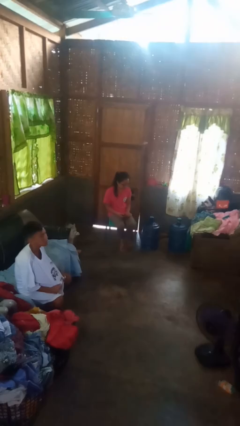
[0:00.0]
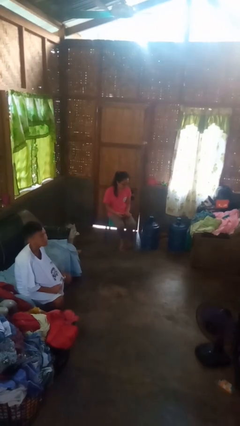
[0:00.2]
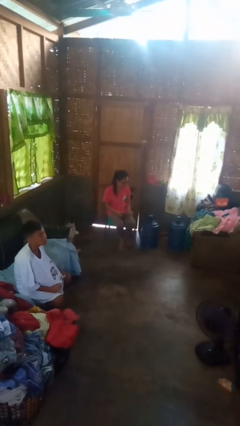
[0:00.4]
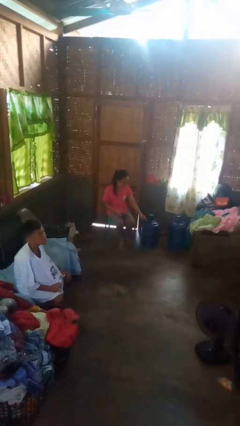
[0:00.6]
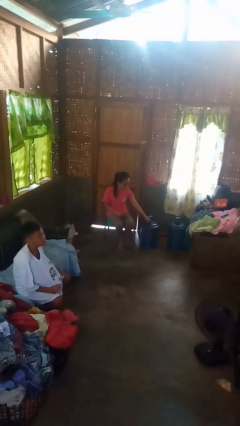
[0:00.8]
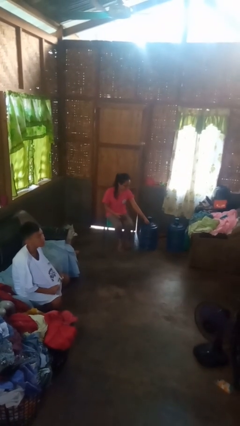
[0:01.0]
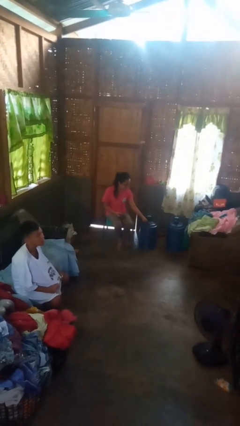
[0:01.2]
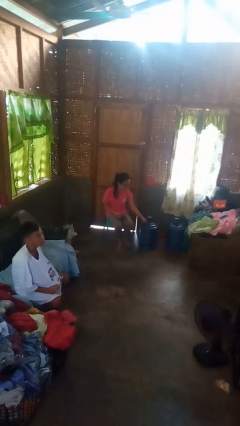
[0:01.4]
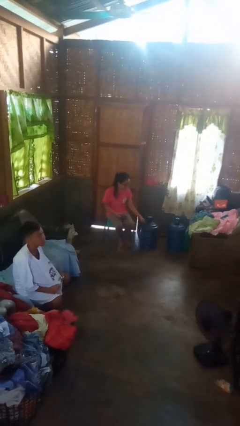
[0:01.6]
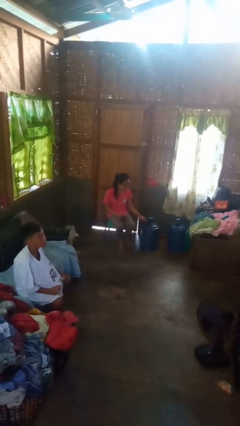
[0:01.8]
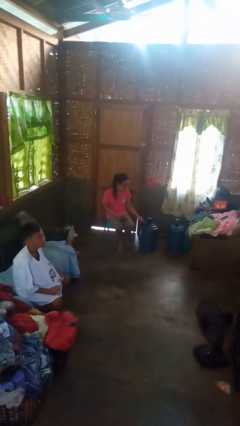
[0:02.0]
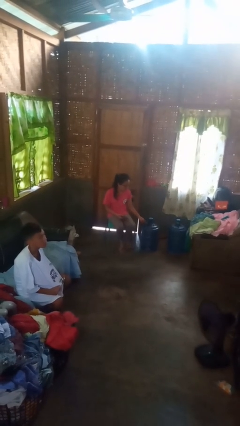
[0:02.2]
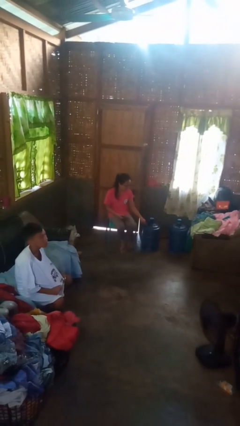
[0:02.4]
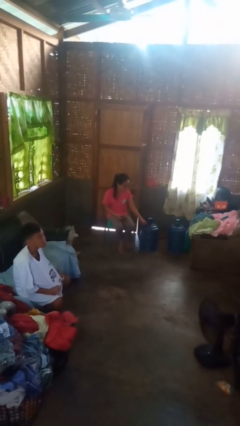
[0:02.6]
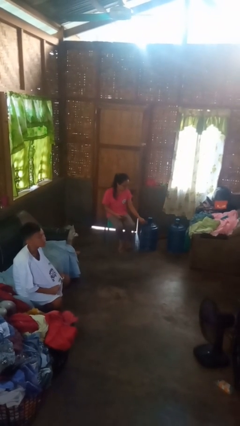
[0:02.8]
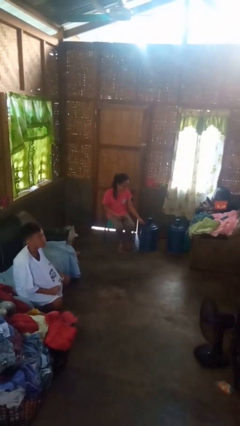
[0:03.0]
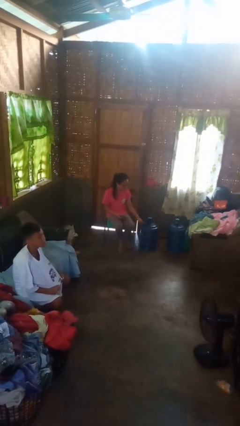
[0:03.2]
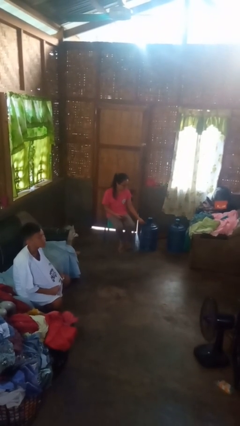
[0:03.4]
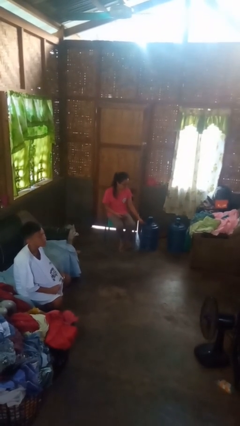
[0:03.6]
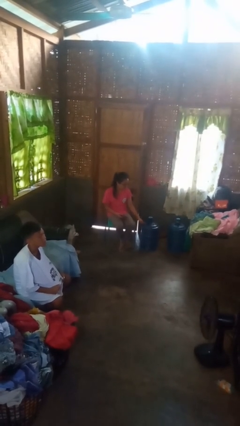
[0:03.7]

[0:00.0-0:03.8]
person taps object with finger

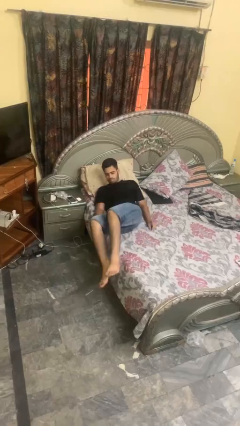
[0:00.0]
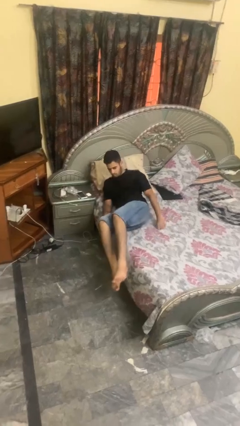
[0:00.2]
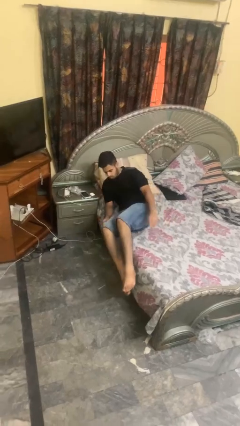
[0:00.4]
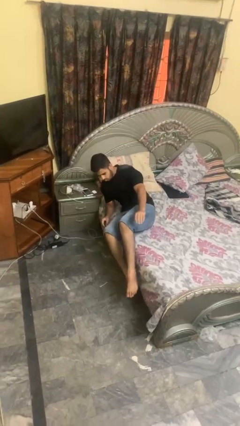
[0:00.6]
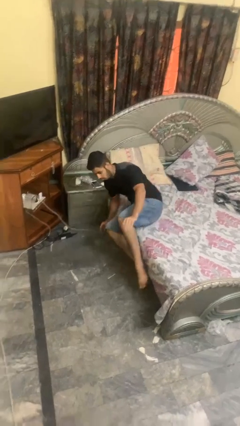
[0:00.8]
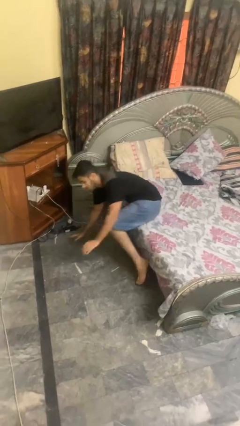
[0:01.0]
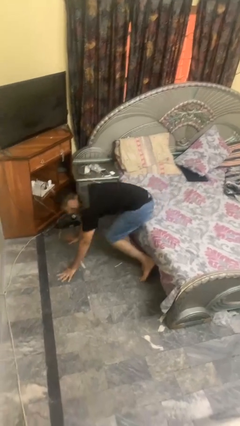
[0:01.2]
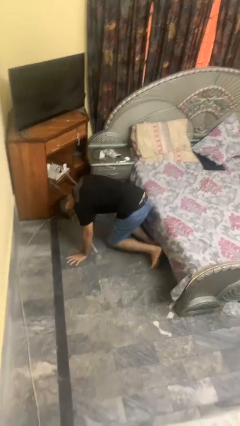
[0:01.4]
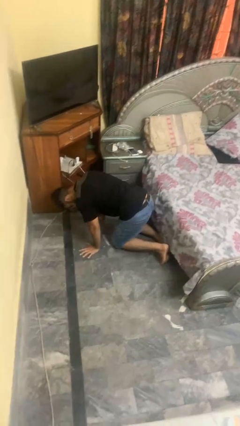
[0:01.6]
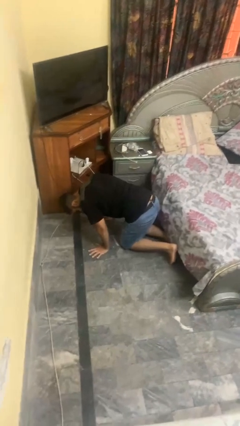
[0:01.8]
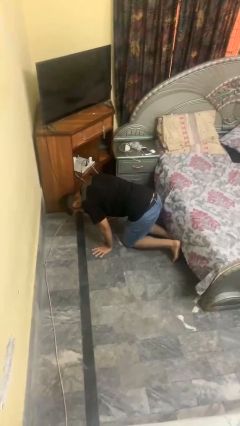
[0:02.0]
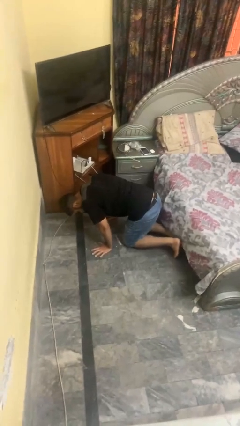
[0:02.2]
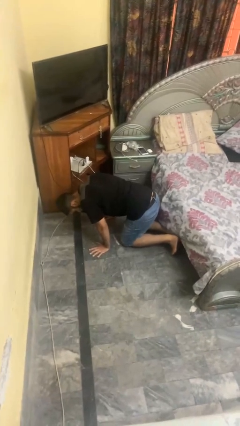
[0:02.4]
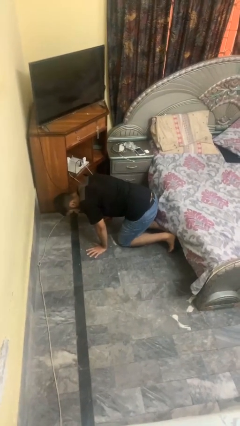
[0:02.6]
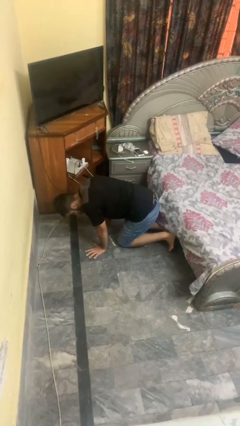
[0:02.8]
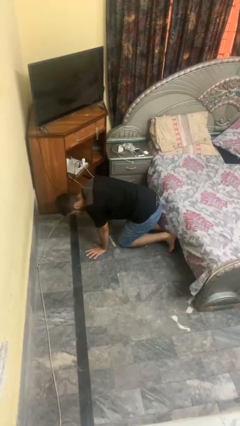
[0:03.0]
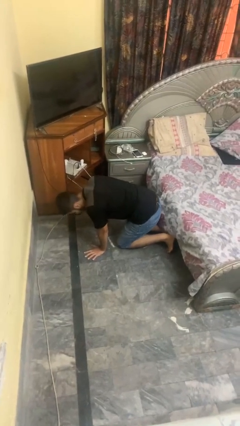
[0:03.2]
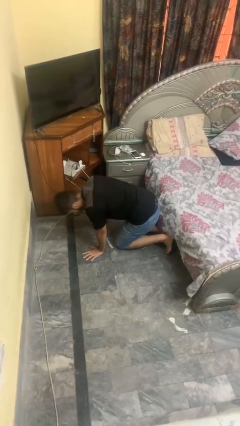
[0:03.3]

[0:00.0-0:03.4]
person falls from bed

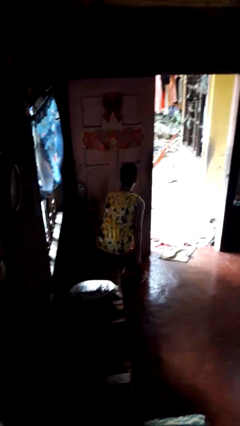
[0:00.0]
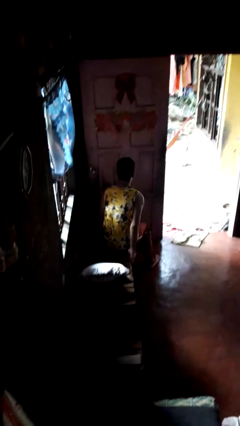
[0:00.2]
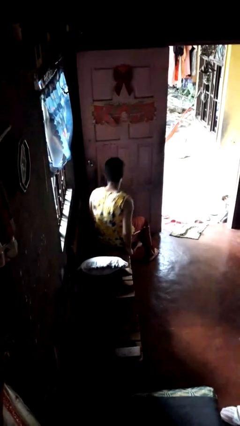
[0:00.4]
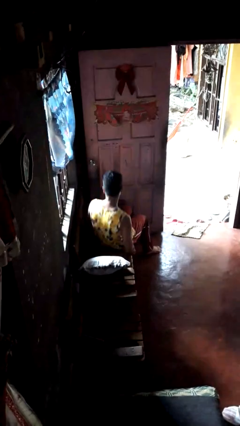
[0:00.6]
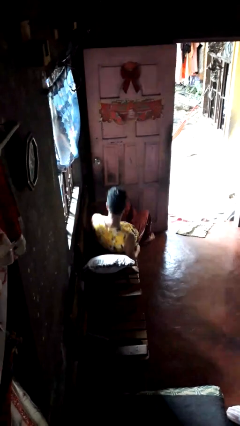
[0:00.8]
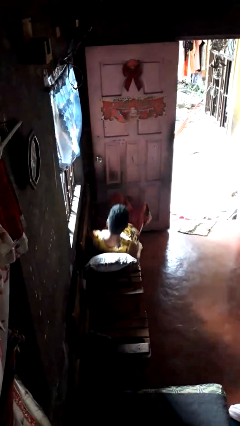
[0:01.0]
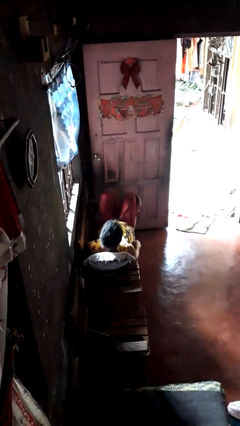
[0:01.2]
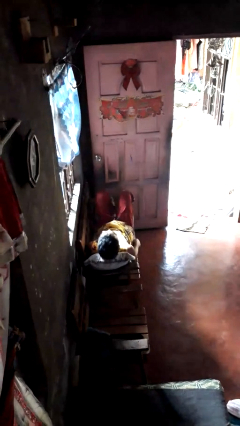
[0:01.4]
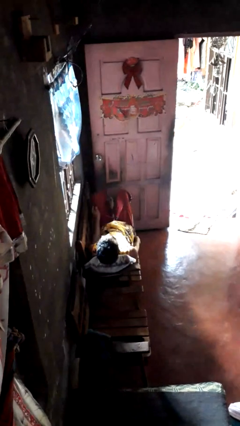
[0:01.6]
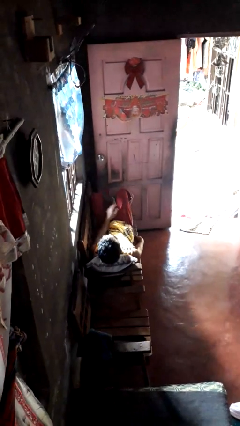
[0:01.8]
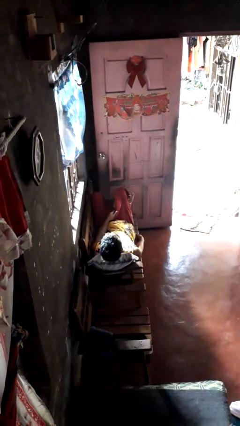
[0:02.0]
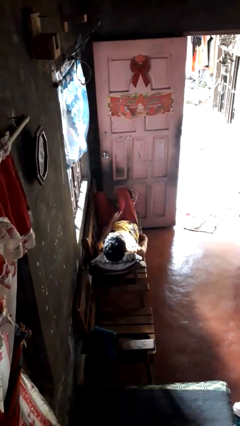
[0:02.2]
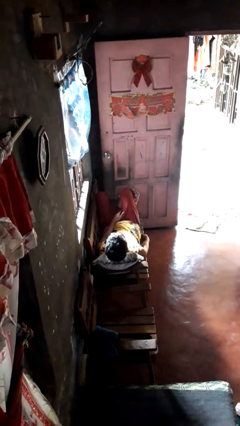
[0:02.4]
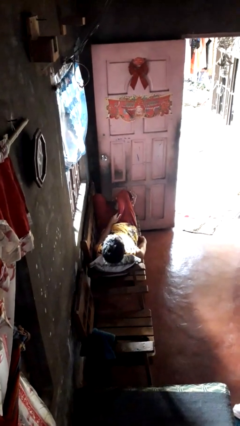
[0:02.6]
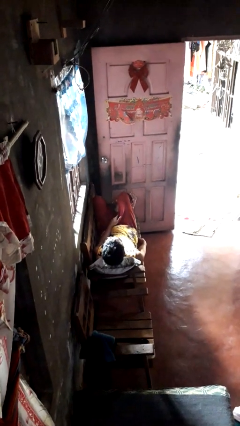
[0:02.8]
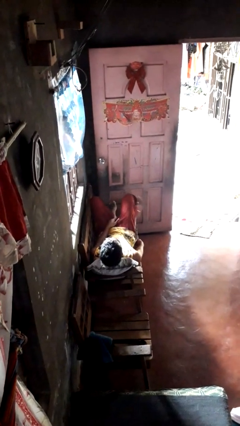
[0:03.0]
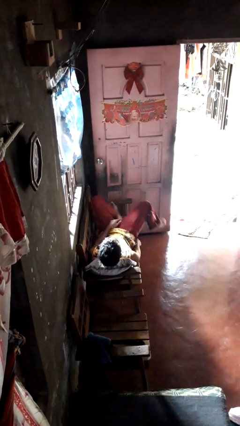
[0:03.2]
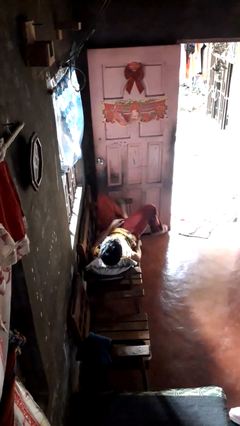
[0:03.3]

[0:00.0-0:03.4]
person lies down on couch

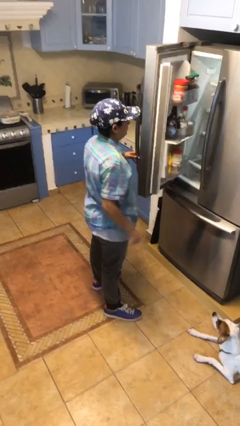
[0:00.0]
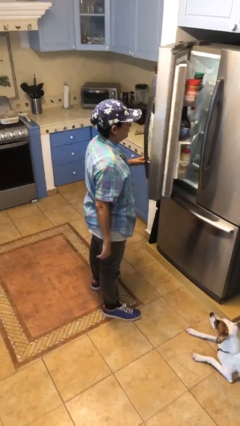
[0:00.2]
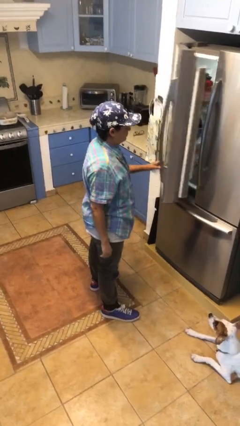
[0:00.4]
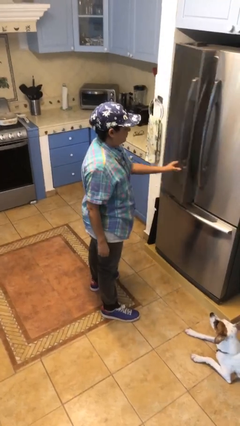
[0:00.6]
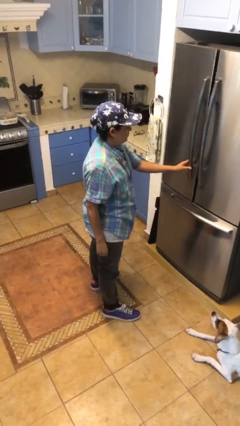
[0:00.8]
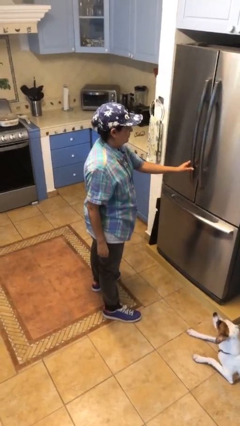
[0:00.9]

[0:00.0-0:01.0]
person closes refrigerator

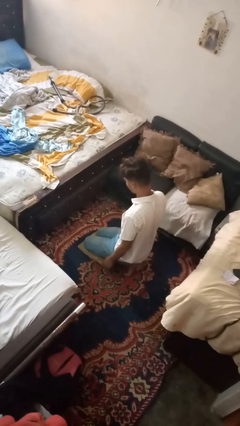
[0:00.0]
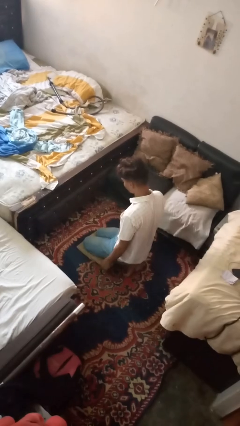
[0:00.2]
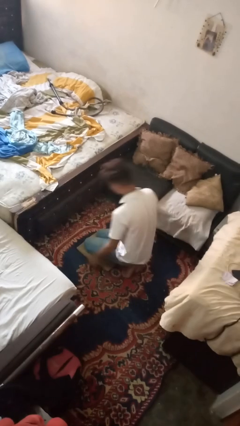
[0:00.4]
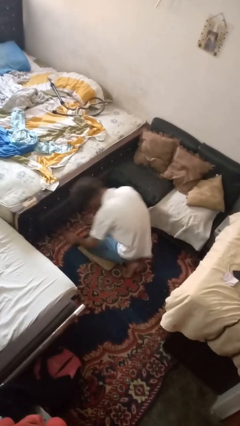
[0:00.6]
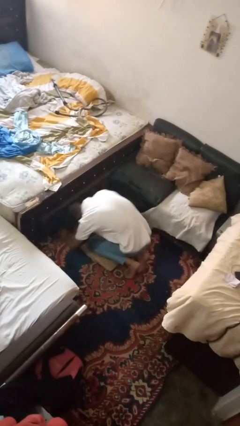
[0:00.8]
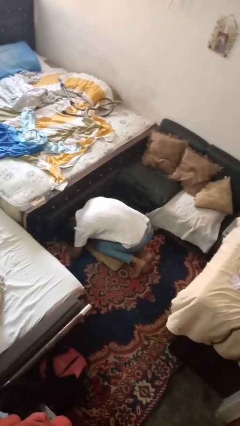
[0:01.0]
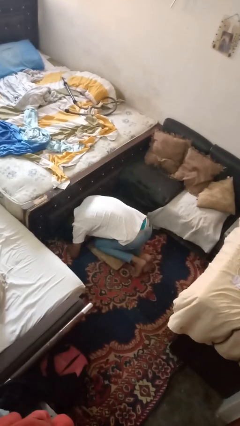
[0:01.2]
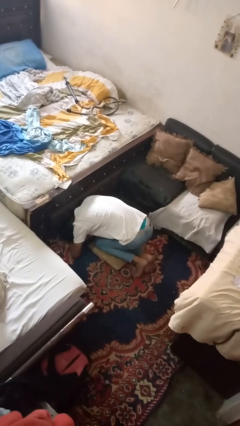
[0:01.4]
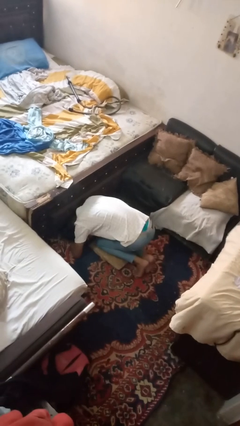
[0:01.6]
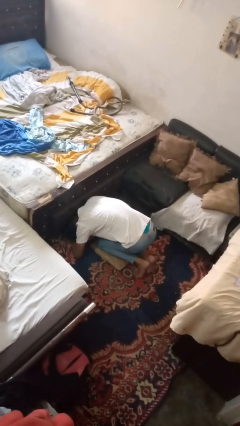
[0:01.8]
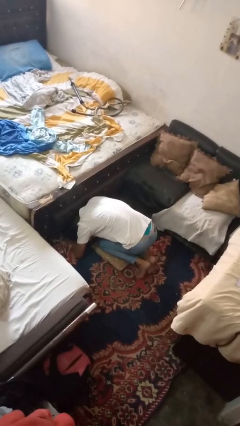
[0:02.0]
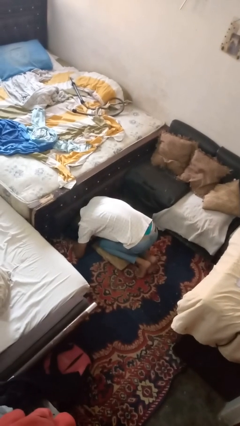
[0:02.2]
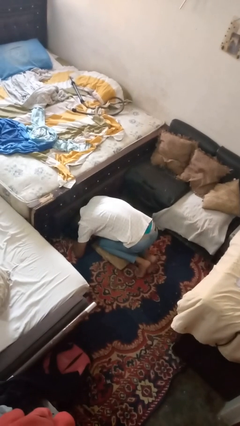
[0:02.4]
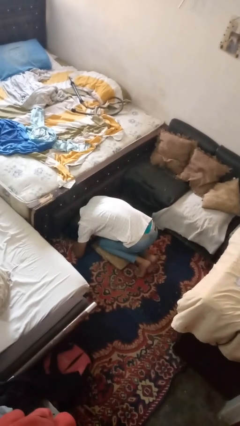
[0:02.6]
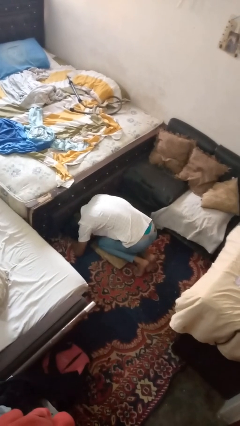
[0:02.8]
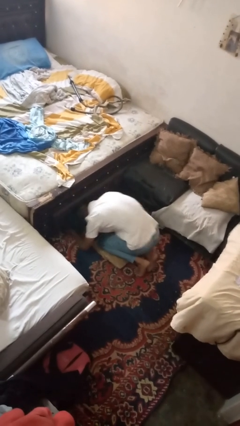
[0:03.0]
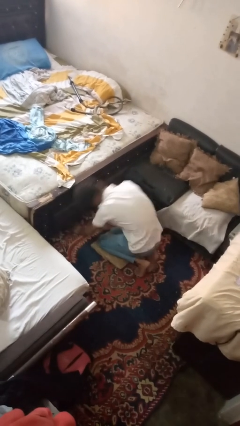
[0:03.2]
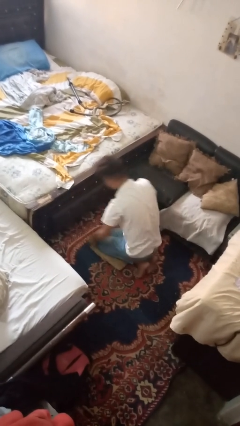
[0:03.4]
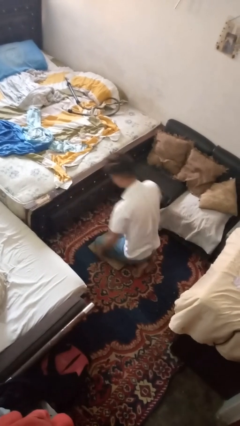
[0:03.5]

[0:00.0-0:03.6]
person searches under bed

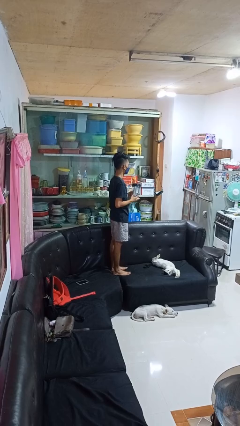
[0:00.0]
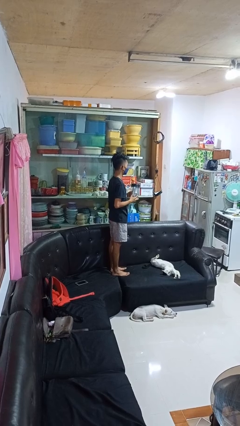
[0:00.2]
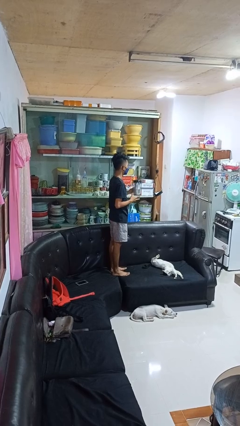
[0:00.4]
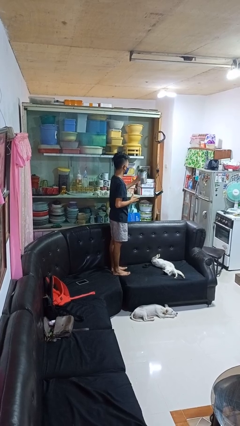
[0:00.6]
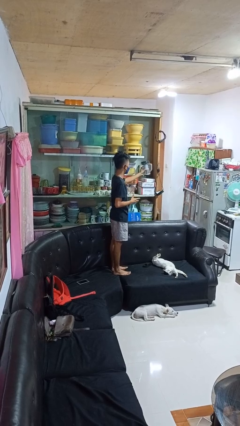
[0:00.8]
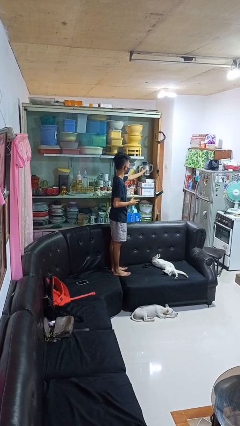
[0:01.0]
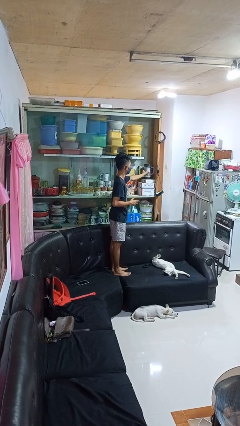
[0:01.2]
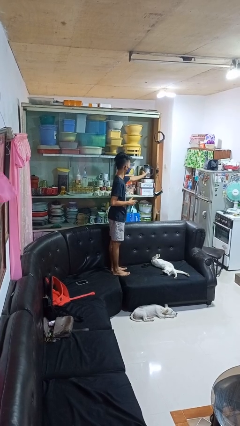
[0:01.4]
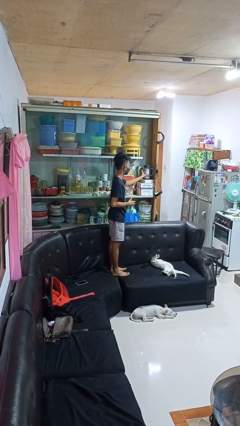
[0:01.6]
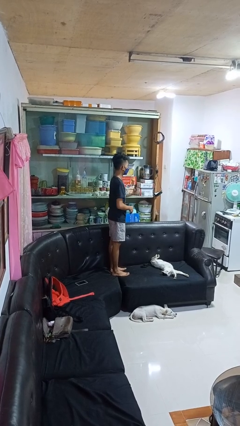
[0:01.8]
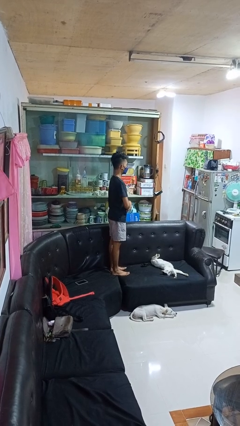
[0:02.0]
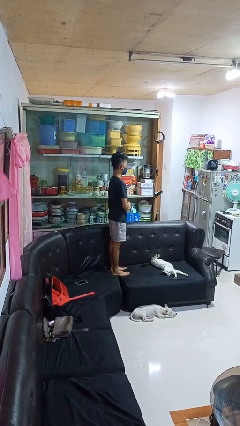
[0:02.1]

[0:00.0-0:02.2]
person puts down object into cabinet
